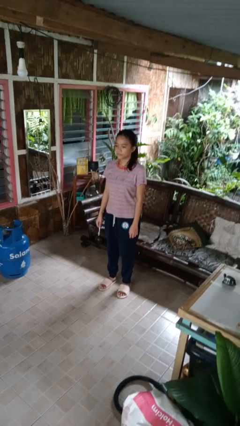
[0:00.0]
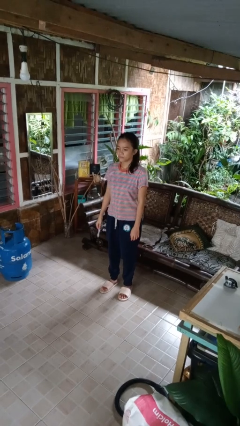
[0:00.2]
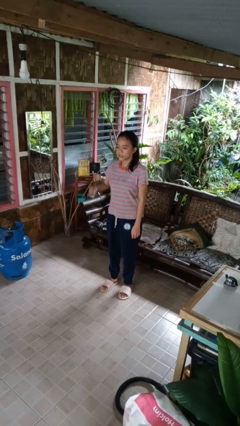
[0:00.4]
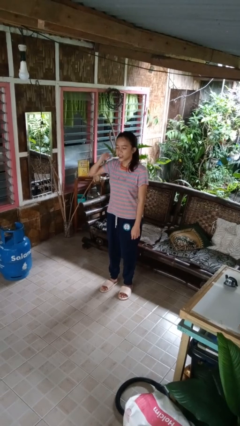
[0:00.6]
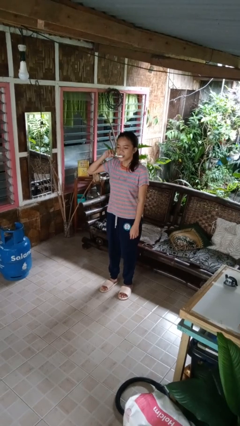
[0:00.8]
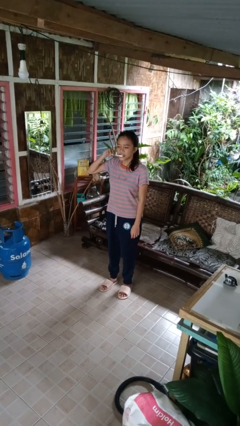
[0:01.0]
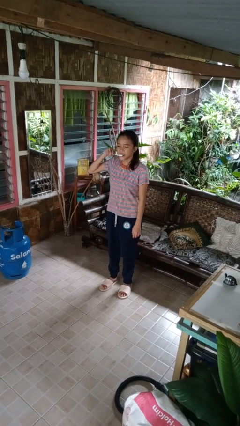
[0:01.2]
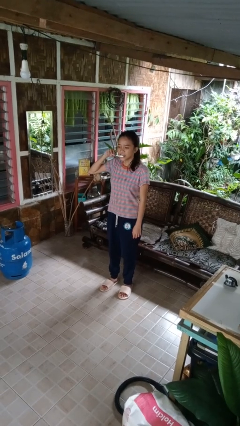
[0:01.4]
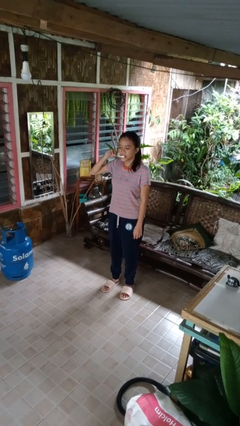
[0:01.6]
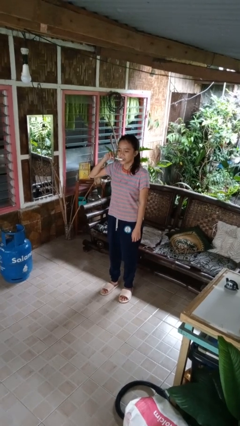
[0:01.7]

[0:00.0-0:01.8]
person brushes teeth

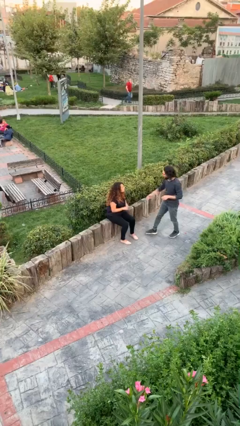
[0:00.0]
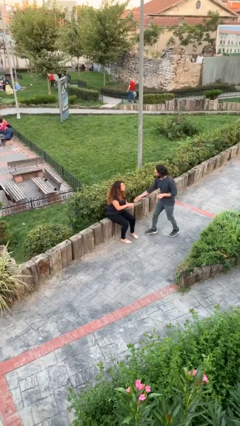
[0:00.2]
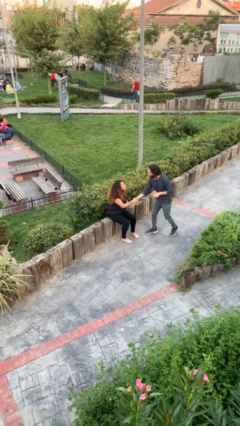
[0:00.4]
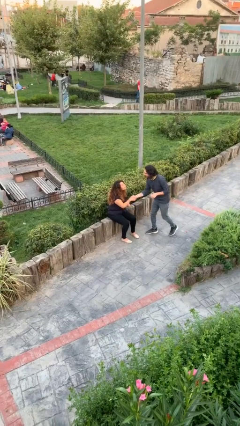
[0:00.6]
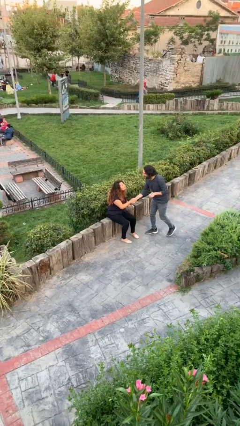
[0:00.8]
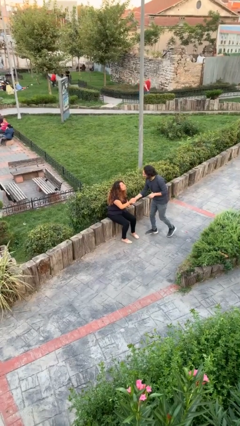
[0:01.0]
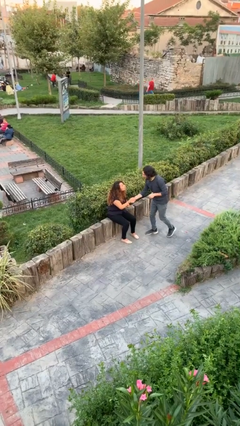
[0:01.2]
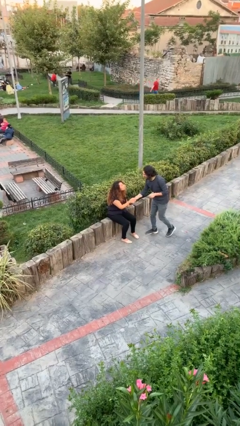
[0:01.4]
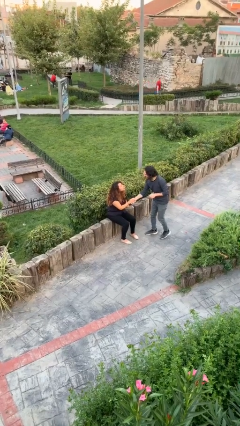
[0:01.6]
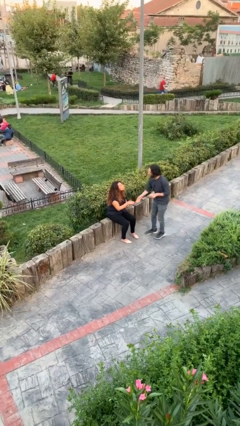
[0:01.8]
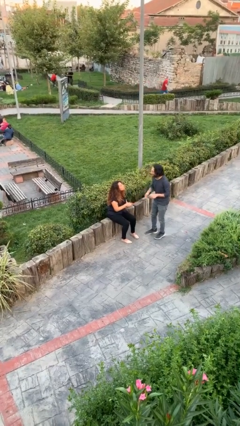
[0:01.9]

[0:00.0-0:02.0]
person shakes hand

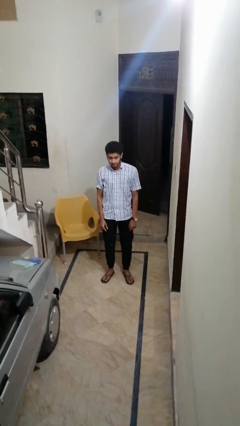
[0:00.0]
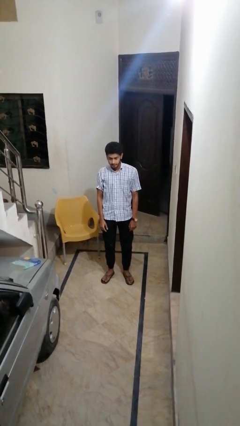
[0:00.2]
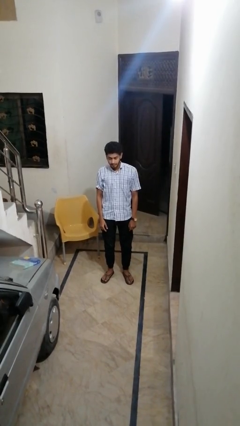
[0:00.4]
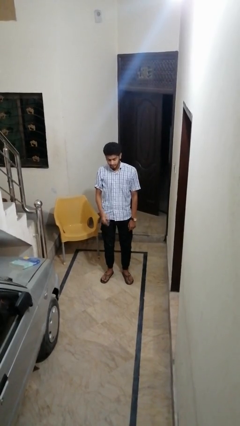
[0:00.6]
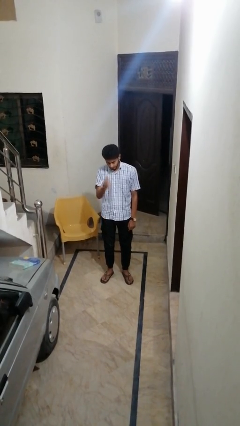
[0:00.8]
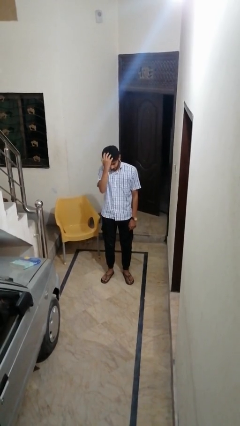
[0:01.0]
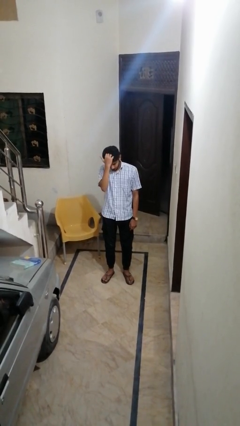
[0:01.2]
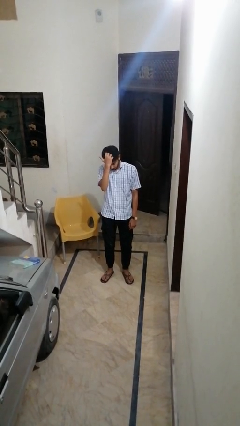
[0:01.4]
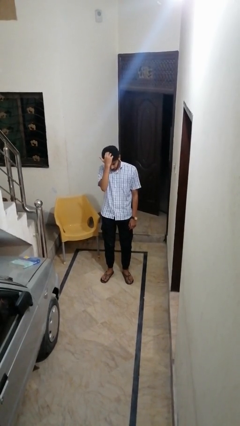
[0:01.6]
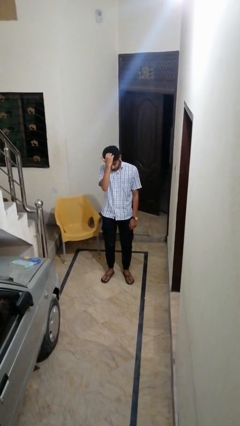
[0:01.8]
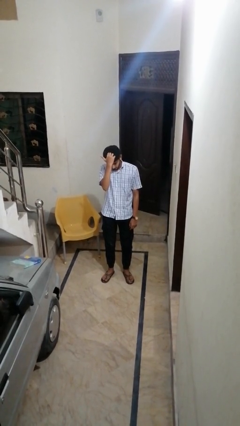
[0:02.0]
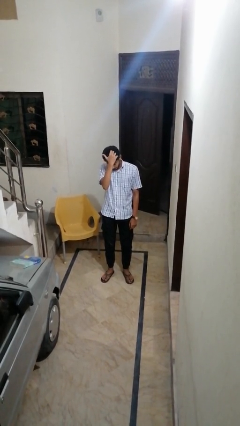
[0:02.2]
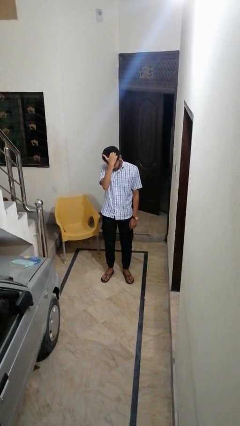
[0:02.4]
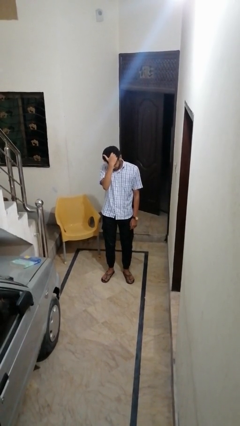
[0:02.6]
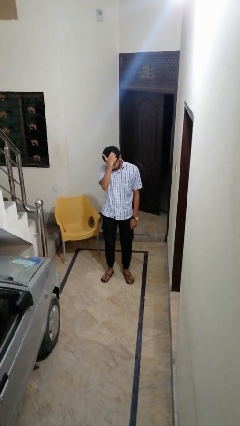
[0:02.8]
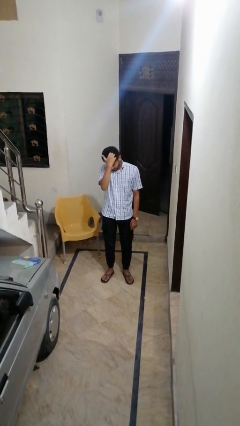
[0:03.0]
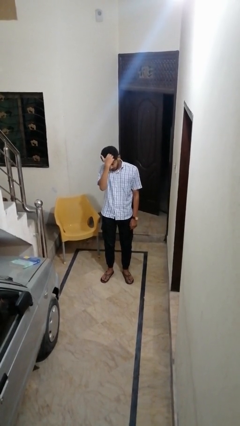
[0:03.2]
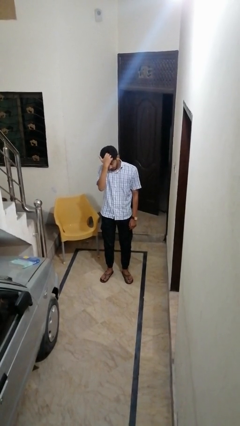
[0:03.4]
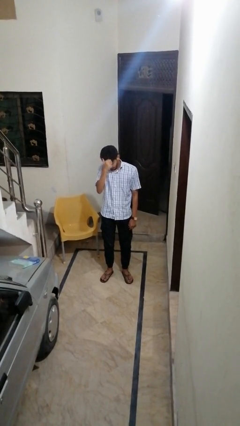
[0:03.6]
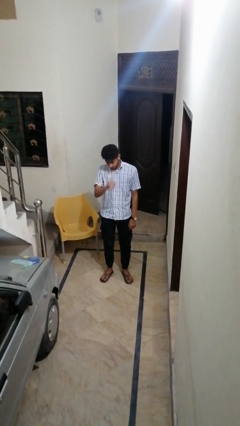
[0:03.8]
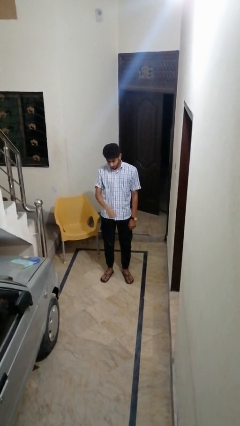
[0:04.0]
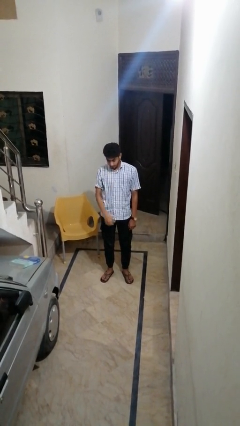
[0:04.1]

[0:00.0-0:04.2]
person scratches face

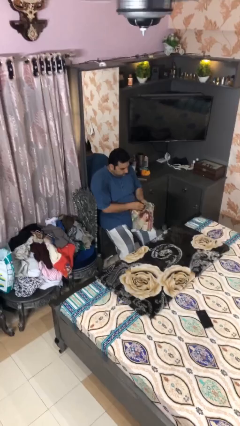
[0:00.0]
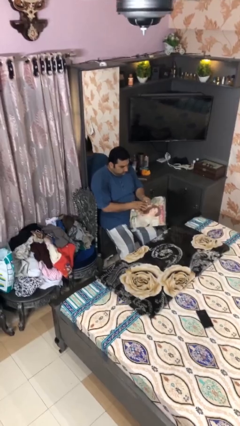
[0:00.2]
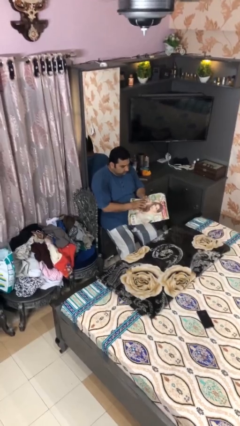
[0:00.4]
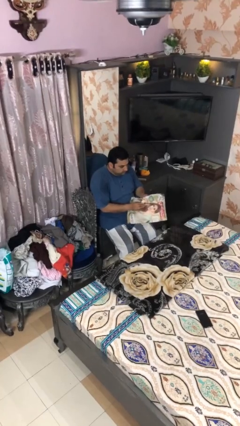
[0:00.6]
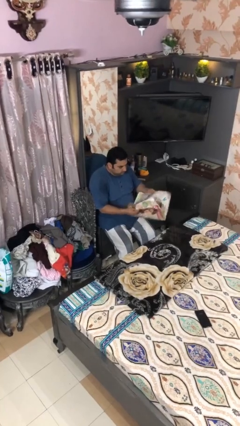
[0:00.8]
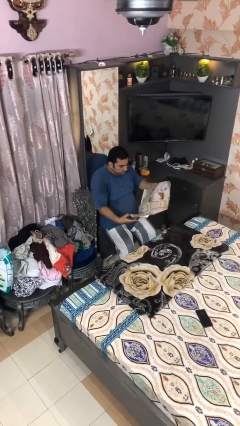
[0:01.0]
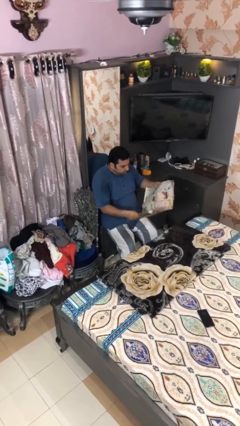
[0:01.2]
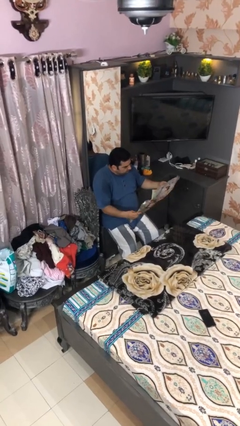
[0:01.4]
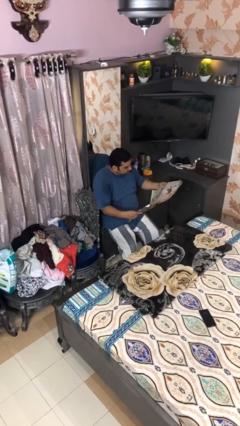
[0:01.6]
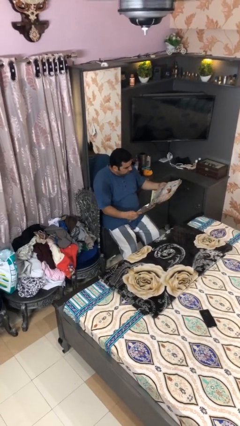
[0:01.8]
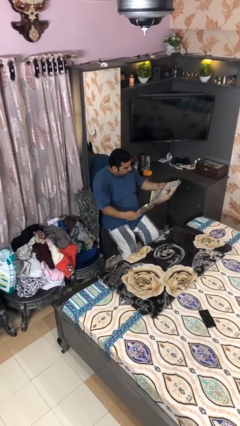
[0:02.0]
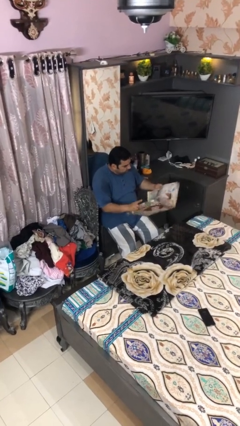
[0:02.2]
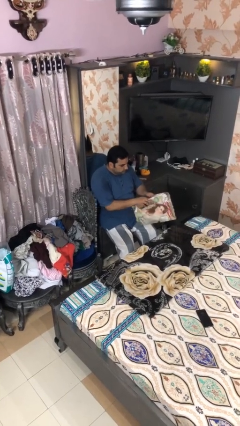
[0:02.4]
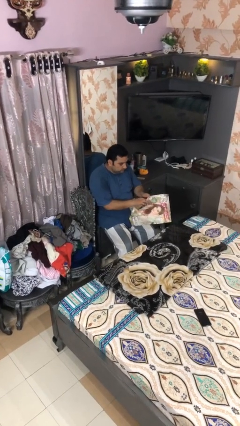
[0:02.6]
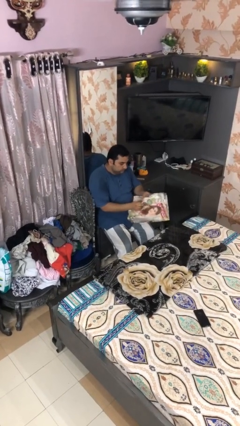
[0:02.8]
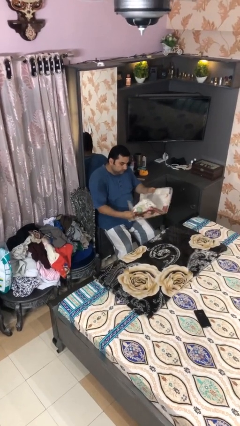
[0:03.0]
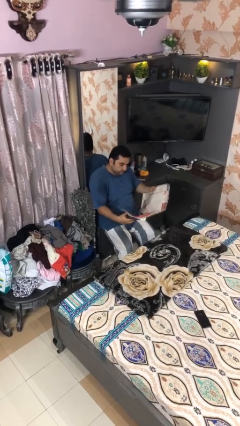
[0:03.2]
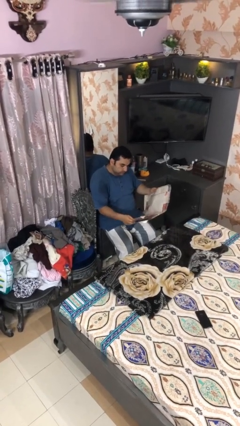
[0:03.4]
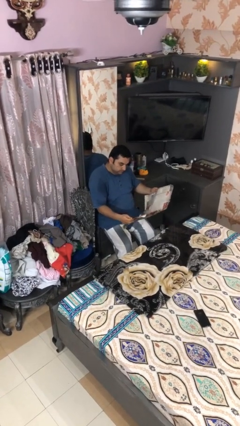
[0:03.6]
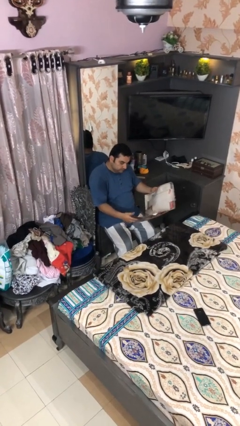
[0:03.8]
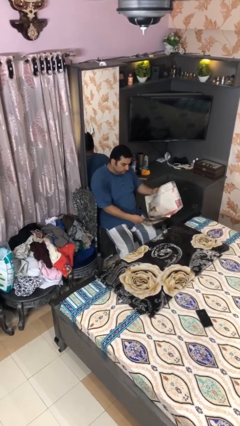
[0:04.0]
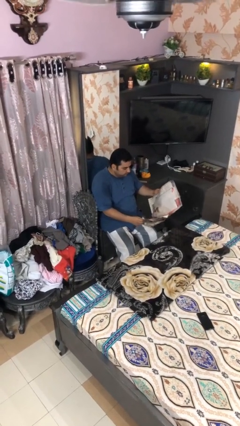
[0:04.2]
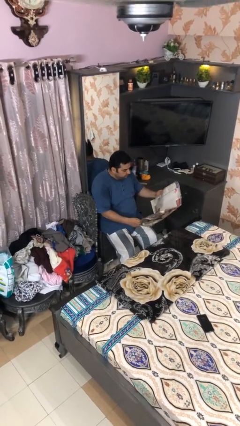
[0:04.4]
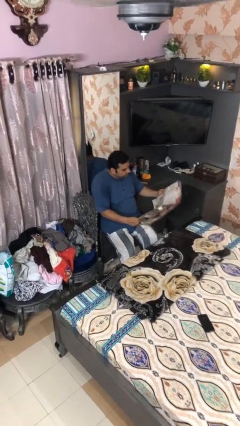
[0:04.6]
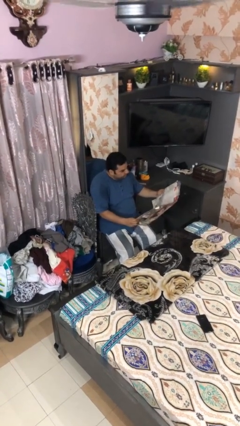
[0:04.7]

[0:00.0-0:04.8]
person reads magazine

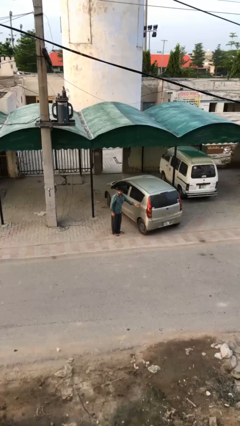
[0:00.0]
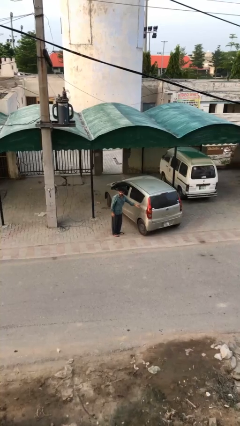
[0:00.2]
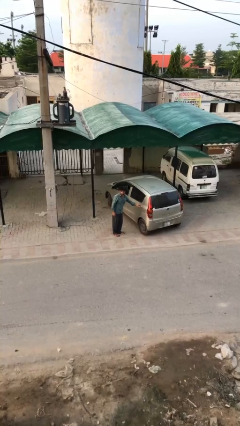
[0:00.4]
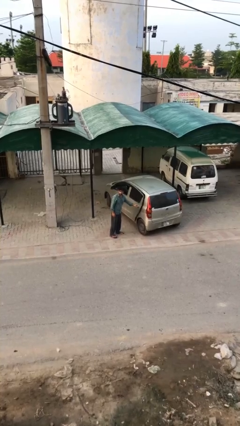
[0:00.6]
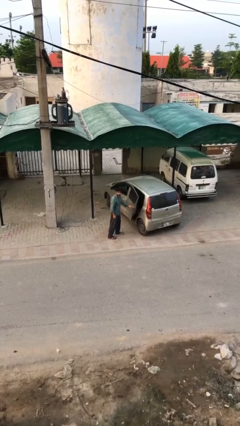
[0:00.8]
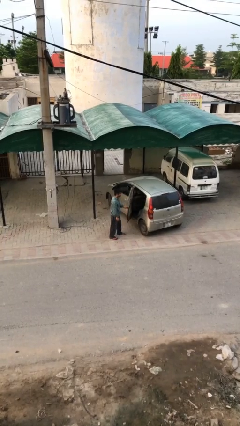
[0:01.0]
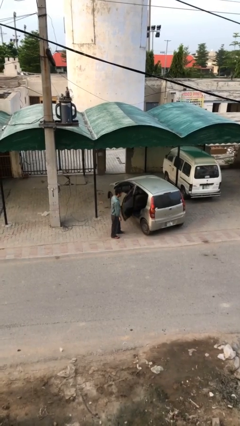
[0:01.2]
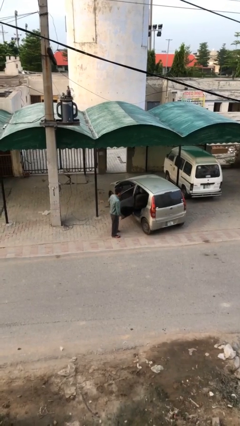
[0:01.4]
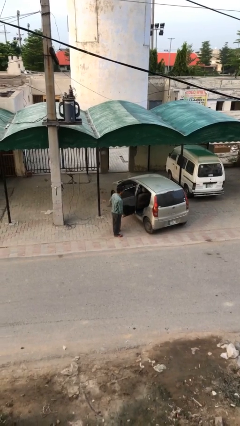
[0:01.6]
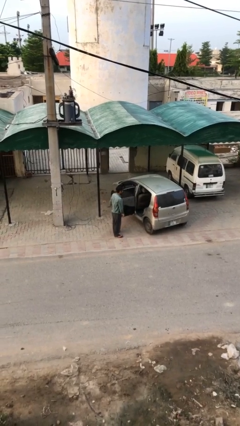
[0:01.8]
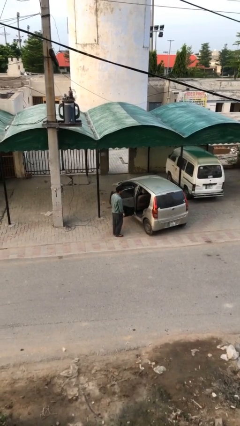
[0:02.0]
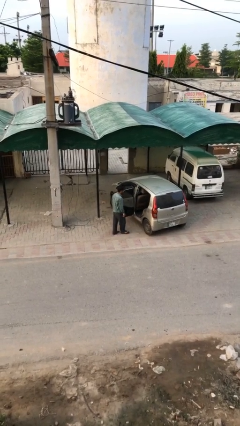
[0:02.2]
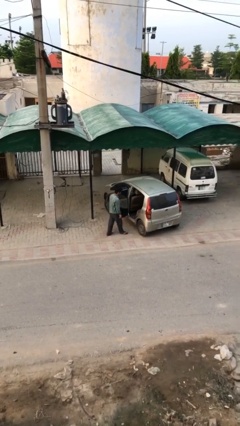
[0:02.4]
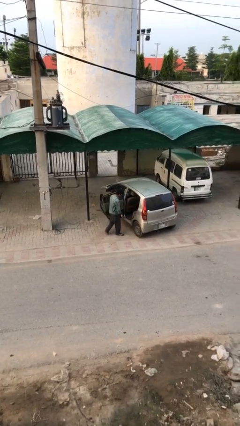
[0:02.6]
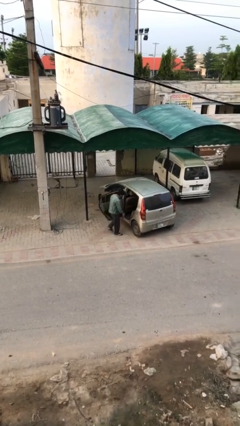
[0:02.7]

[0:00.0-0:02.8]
person opens car door

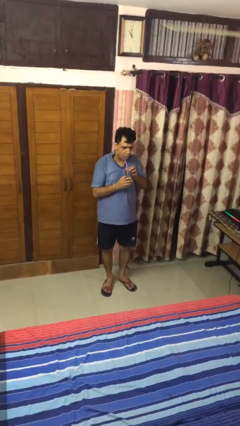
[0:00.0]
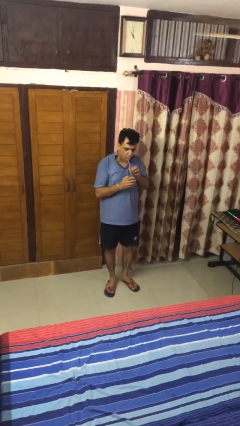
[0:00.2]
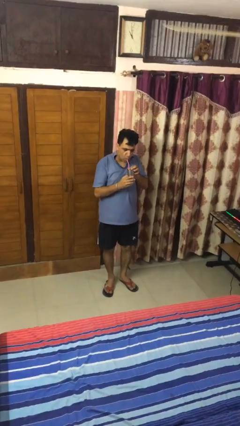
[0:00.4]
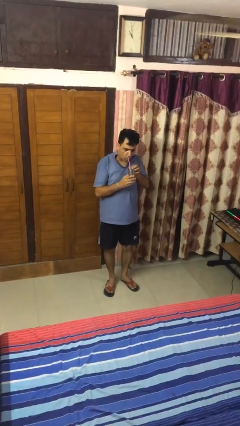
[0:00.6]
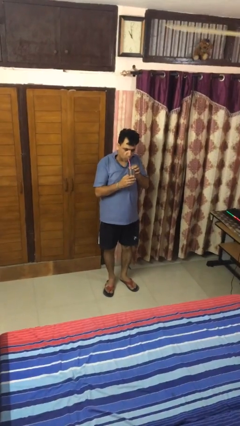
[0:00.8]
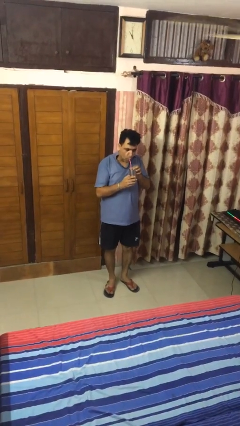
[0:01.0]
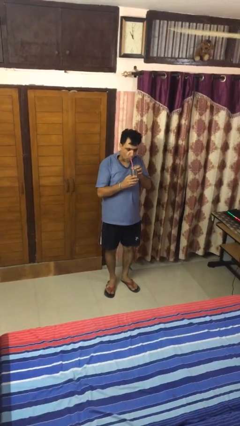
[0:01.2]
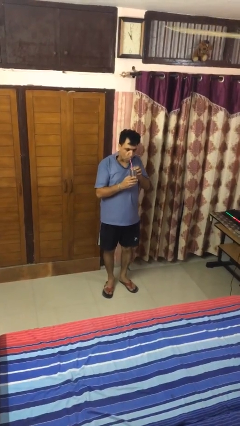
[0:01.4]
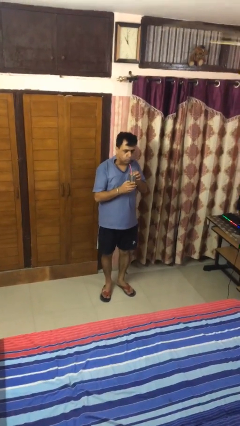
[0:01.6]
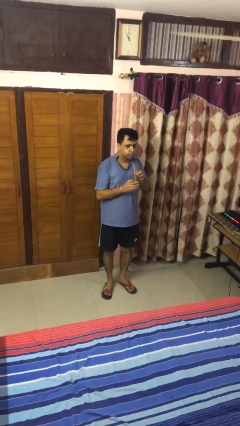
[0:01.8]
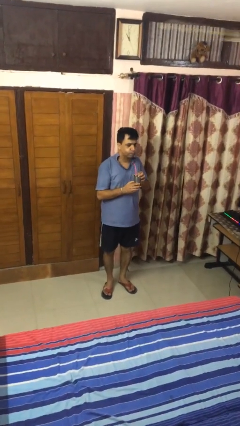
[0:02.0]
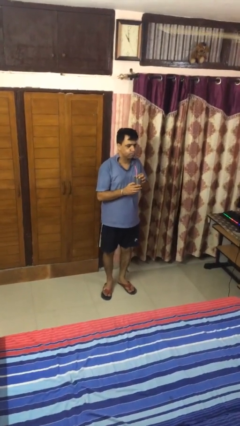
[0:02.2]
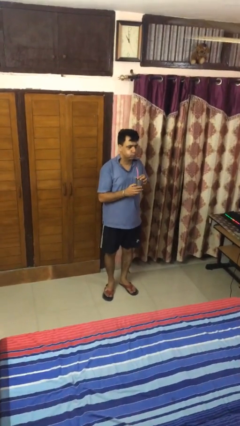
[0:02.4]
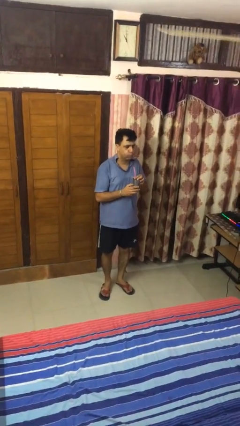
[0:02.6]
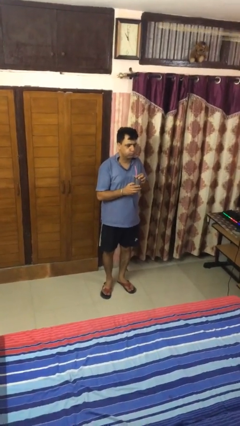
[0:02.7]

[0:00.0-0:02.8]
person drinks from straw
